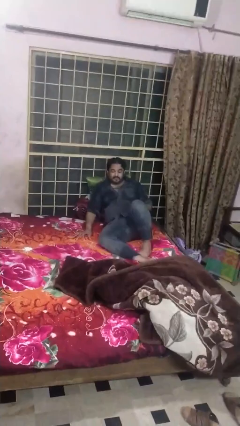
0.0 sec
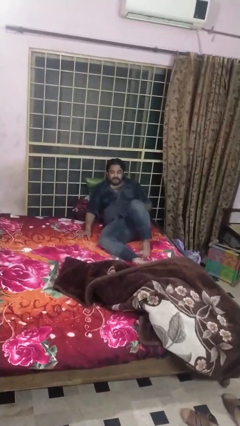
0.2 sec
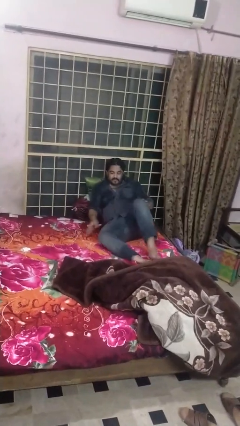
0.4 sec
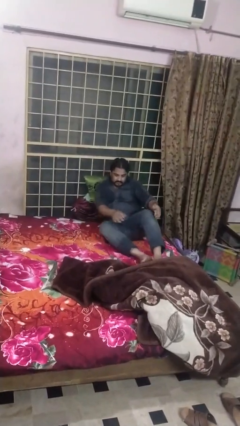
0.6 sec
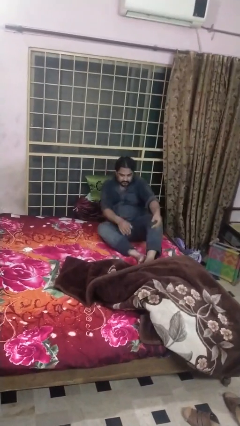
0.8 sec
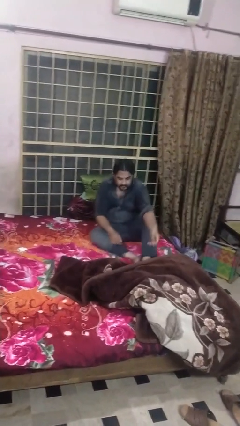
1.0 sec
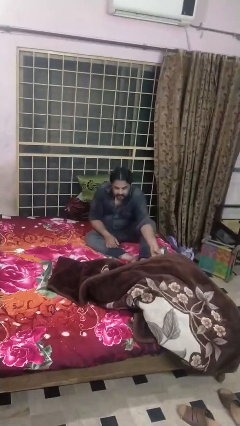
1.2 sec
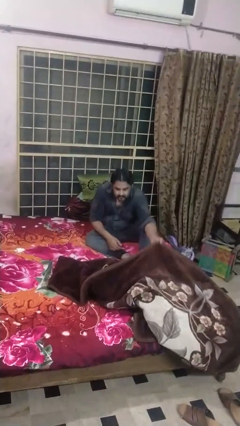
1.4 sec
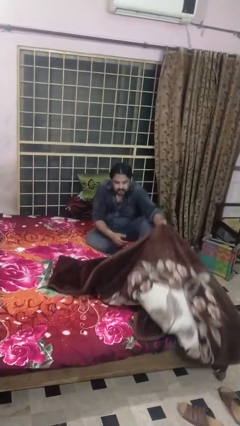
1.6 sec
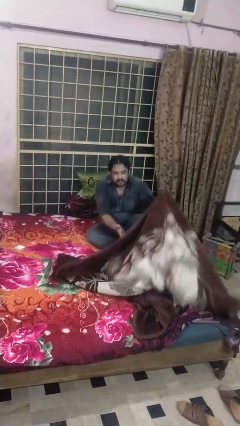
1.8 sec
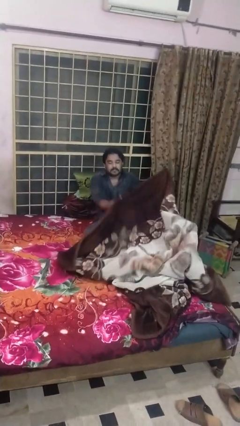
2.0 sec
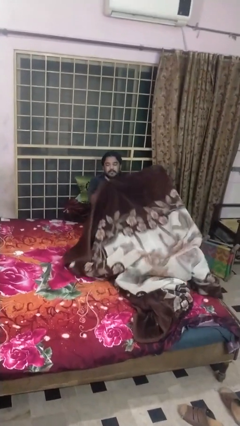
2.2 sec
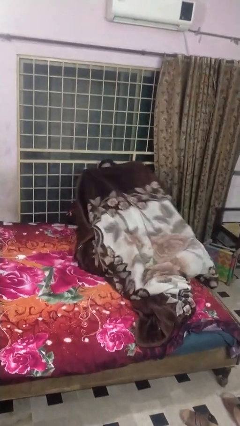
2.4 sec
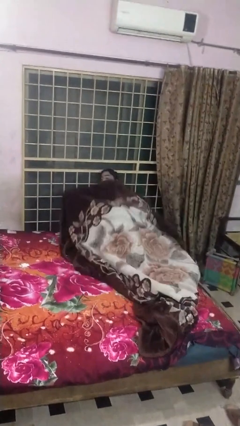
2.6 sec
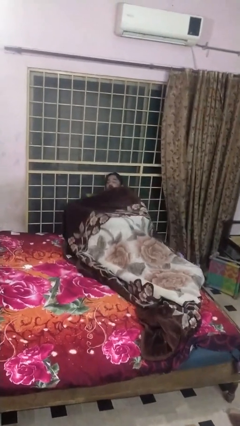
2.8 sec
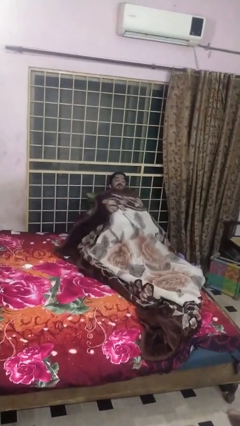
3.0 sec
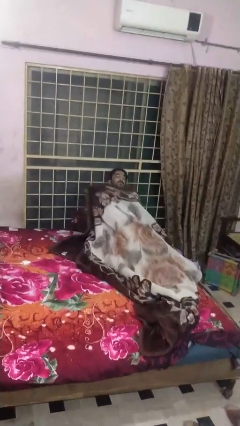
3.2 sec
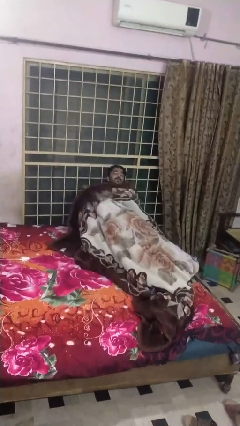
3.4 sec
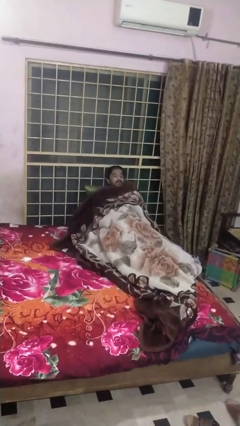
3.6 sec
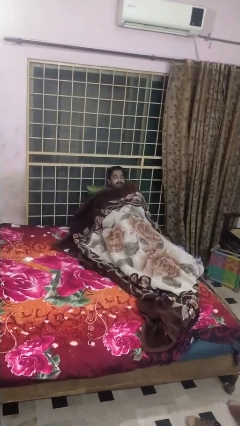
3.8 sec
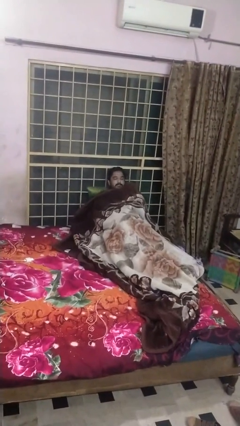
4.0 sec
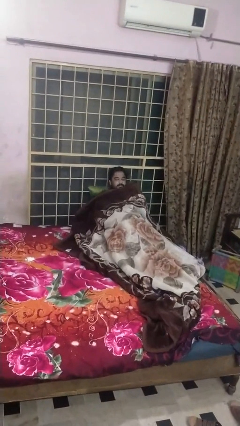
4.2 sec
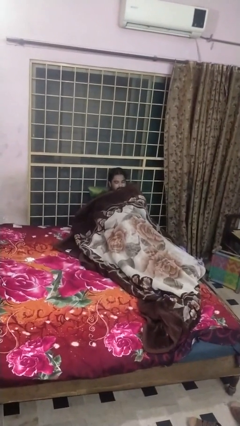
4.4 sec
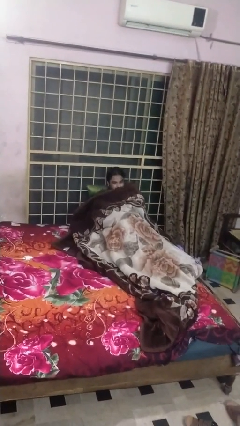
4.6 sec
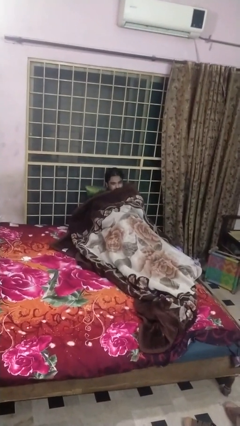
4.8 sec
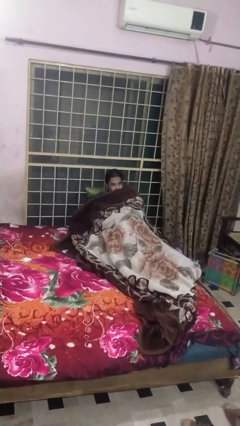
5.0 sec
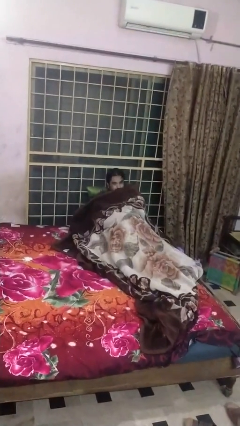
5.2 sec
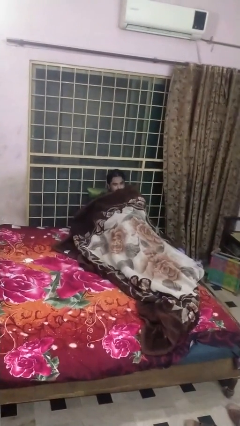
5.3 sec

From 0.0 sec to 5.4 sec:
person covers with blanket

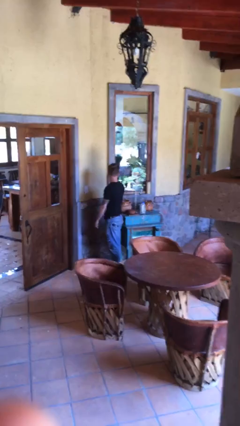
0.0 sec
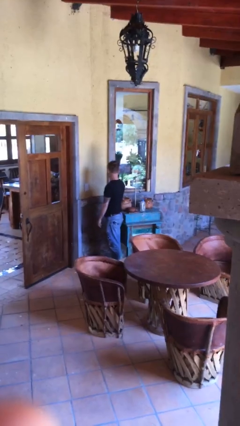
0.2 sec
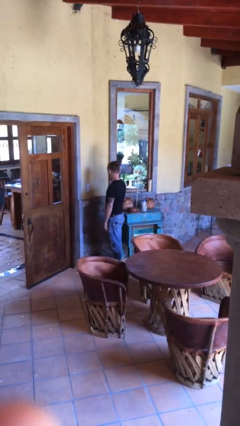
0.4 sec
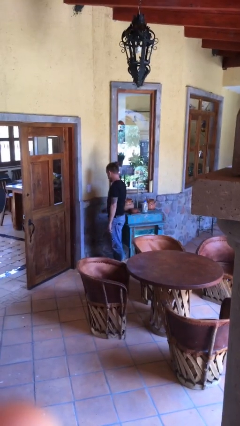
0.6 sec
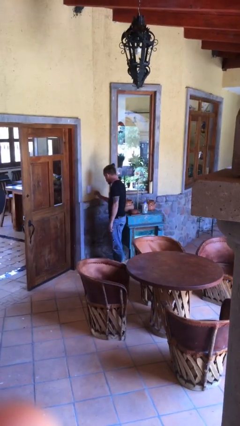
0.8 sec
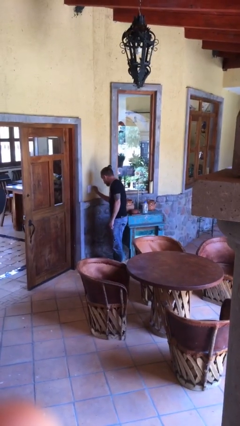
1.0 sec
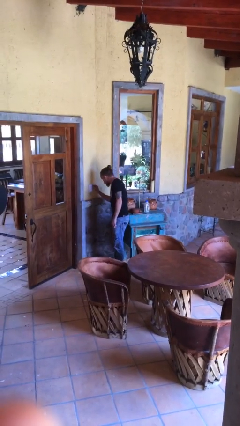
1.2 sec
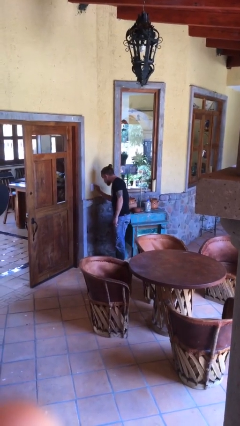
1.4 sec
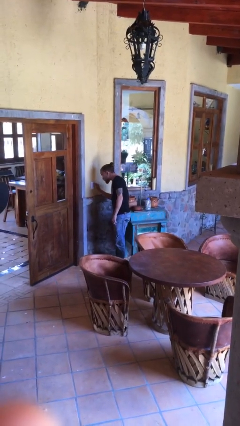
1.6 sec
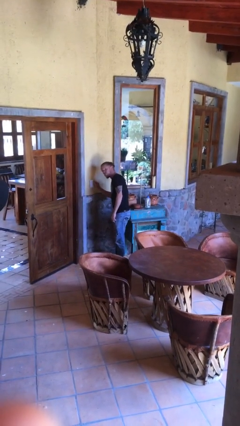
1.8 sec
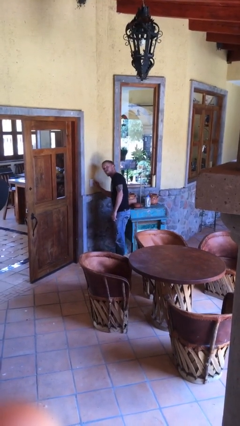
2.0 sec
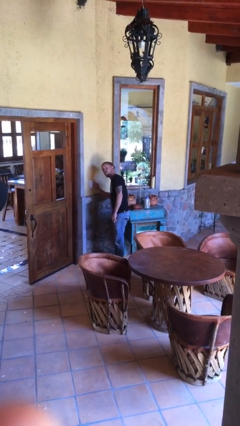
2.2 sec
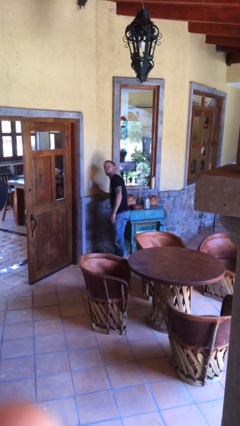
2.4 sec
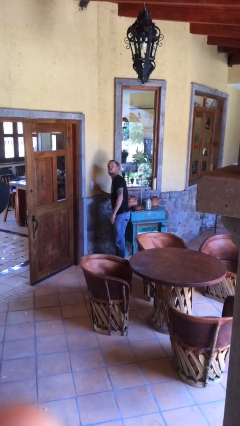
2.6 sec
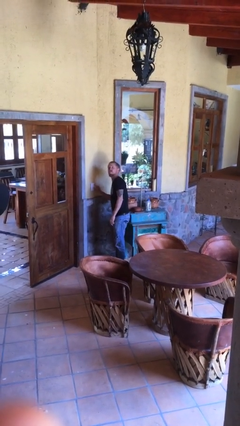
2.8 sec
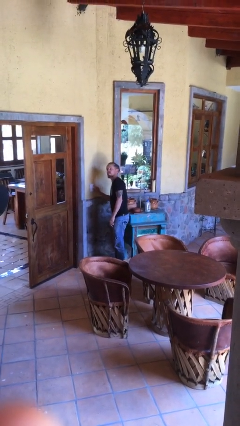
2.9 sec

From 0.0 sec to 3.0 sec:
person adjusts thermostat

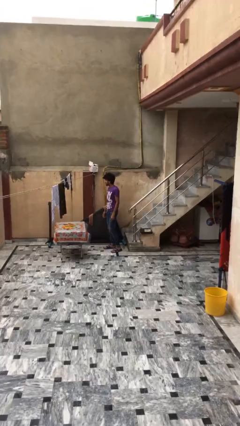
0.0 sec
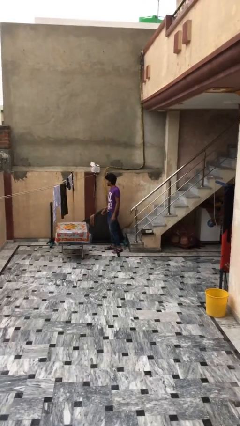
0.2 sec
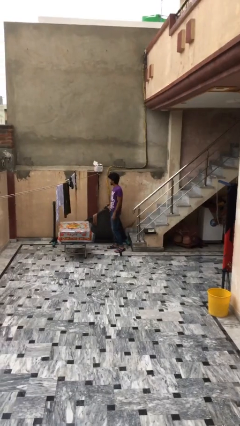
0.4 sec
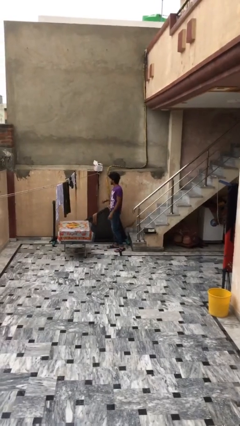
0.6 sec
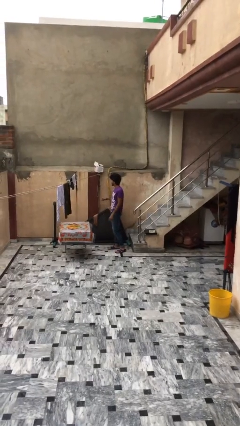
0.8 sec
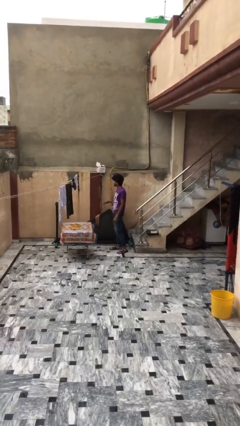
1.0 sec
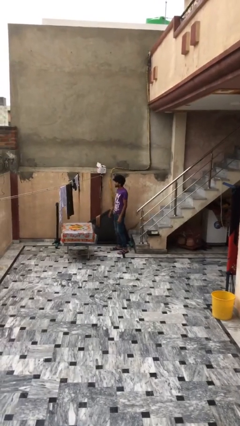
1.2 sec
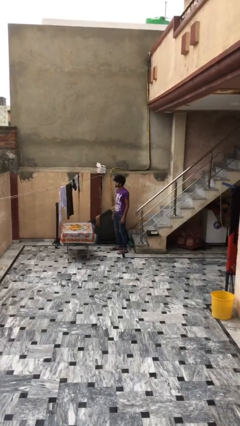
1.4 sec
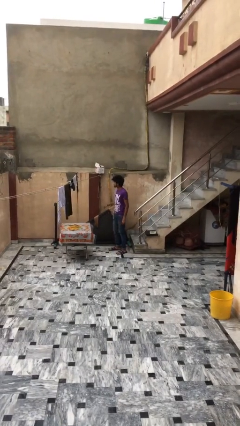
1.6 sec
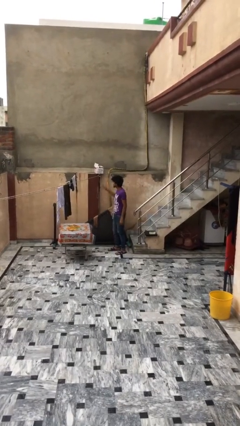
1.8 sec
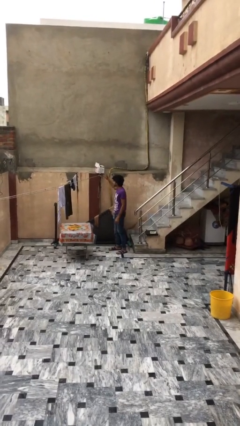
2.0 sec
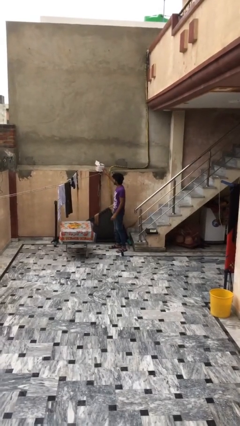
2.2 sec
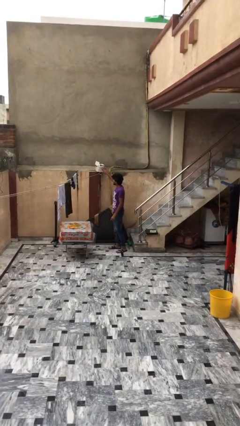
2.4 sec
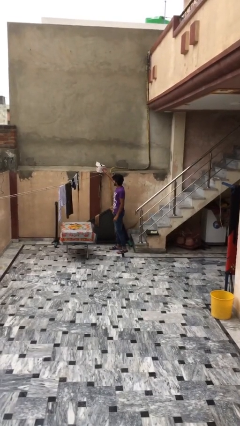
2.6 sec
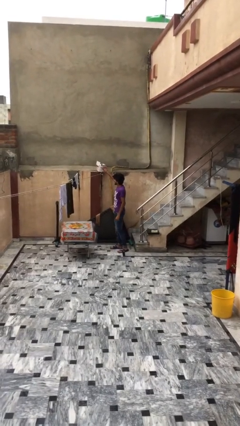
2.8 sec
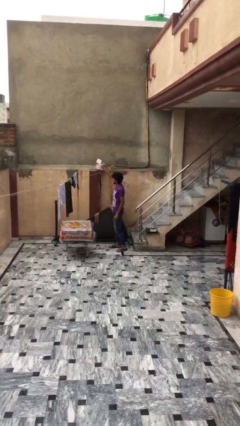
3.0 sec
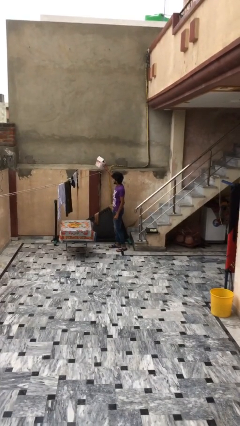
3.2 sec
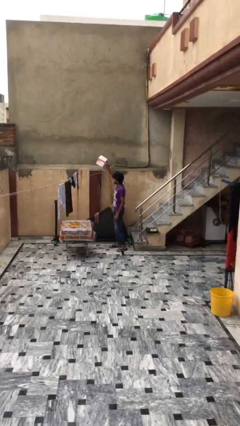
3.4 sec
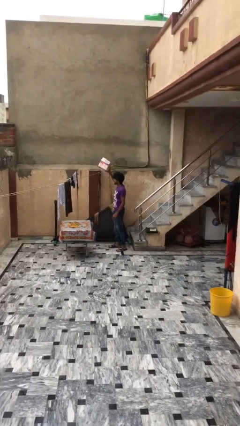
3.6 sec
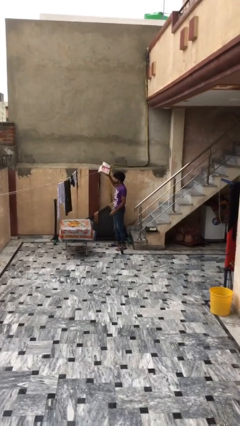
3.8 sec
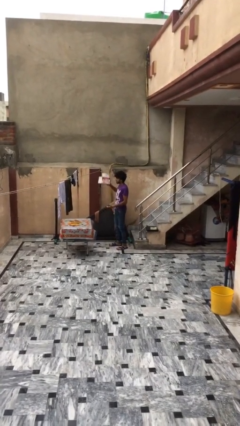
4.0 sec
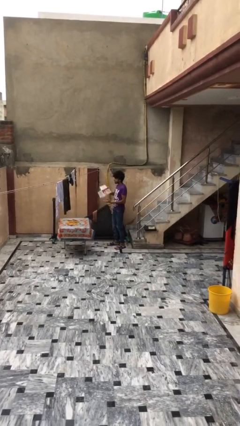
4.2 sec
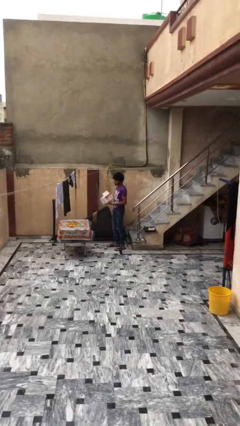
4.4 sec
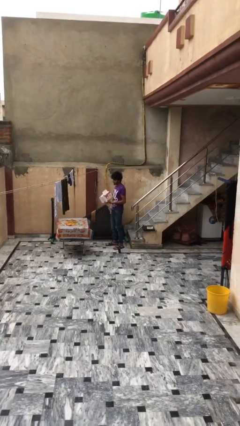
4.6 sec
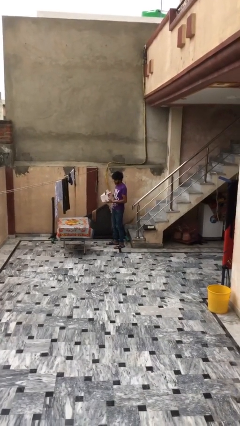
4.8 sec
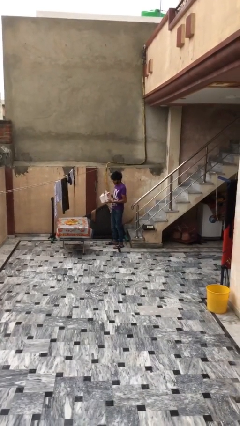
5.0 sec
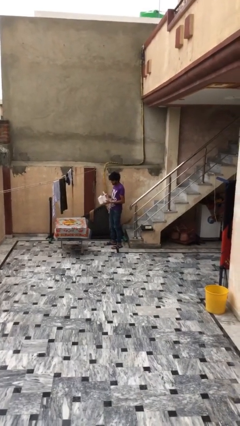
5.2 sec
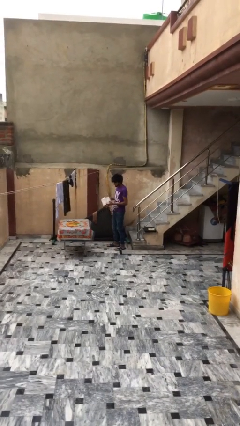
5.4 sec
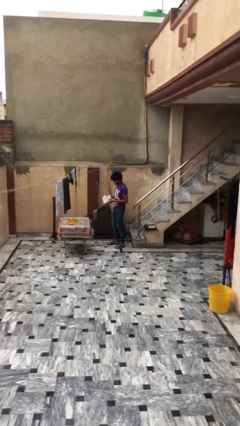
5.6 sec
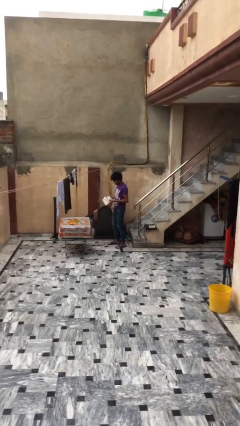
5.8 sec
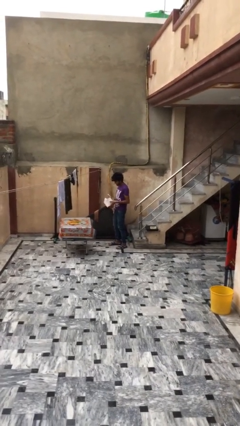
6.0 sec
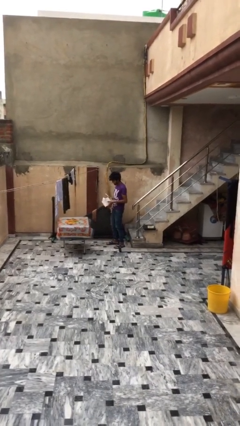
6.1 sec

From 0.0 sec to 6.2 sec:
person picks up object from shelf

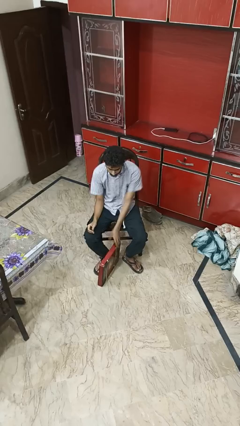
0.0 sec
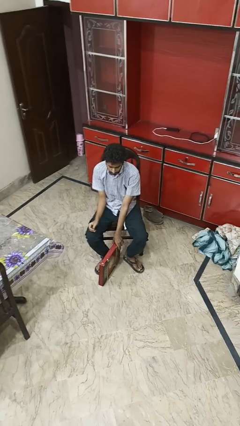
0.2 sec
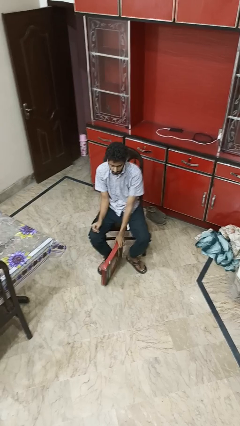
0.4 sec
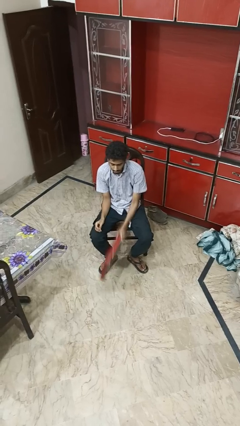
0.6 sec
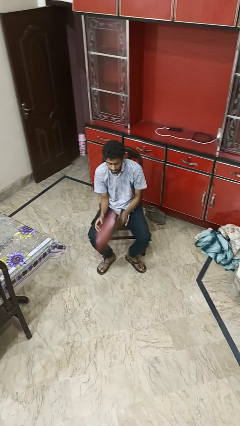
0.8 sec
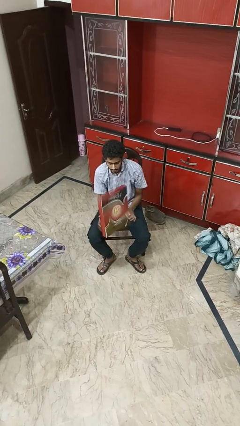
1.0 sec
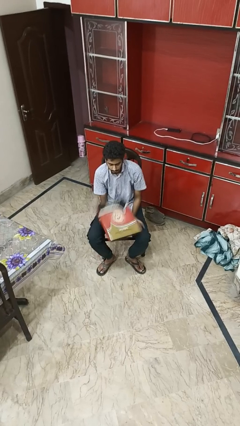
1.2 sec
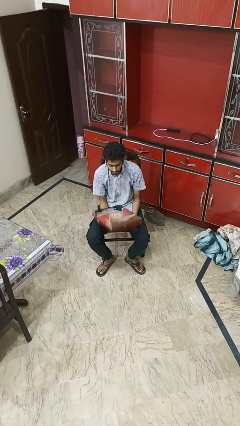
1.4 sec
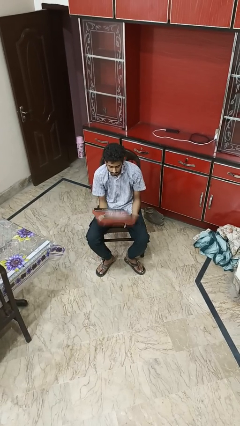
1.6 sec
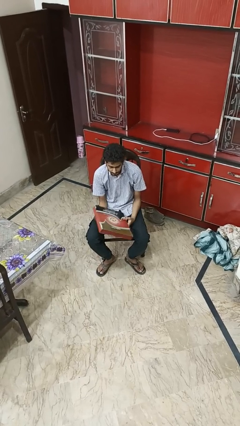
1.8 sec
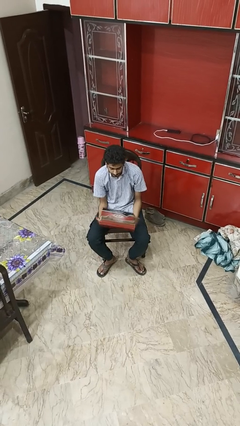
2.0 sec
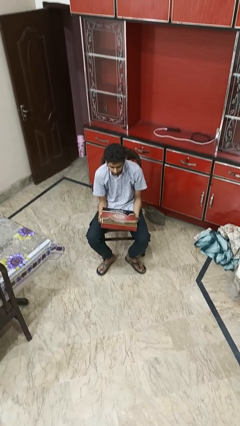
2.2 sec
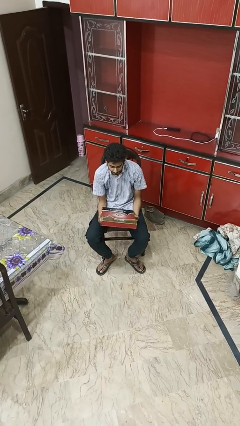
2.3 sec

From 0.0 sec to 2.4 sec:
person picks up object from floor

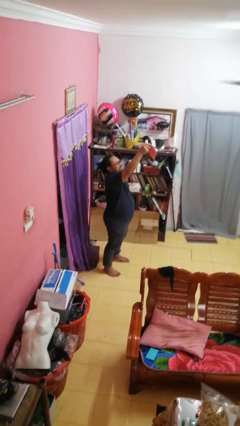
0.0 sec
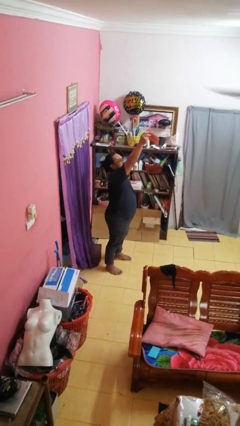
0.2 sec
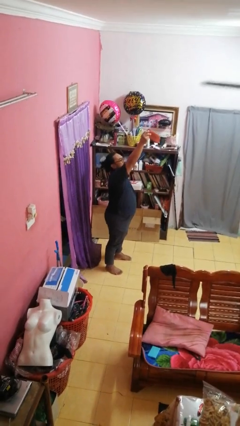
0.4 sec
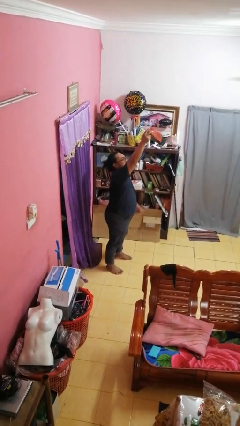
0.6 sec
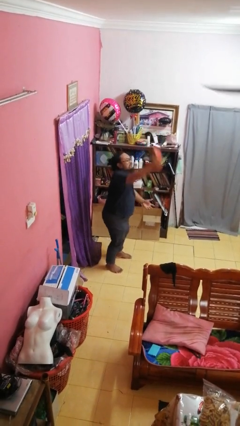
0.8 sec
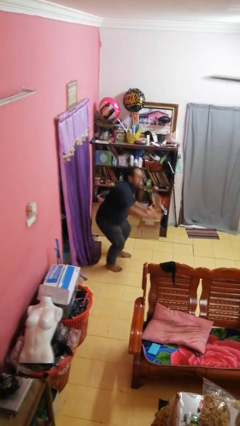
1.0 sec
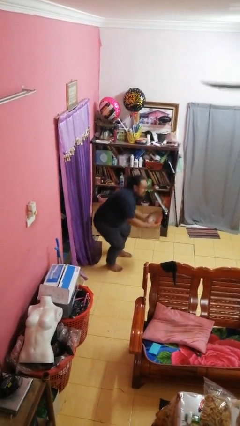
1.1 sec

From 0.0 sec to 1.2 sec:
person drops object
